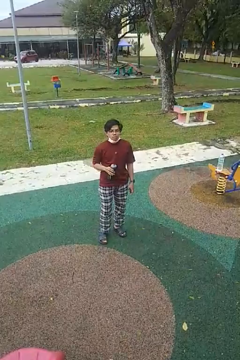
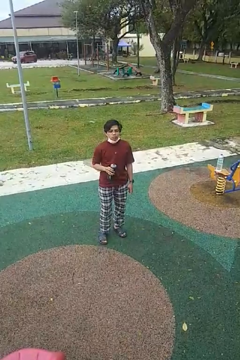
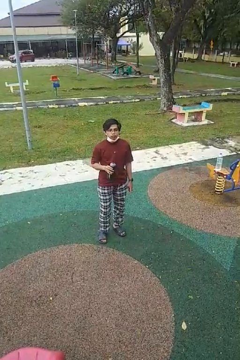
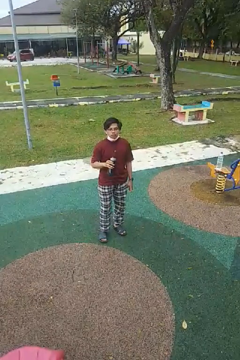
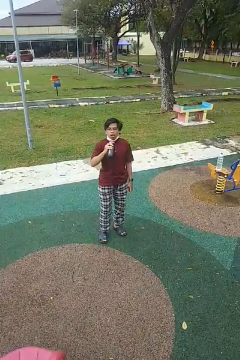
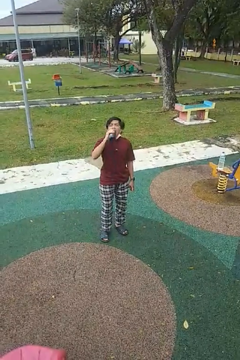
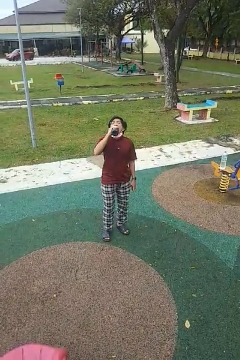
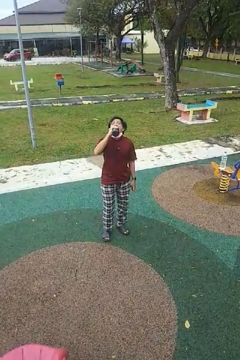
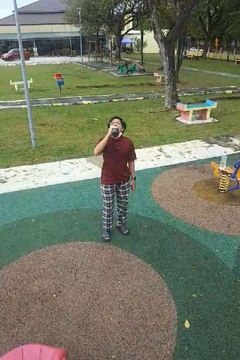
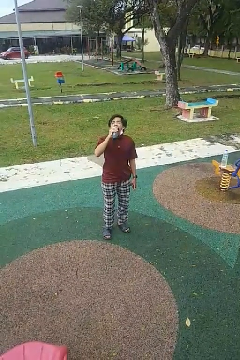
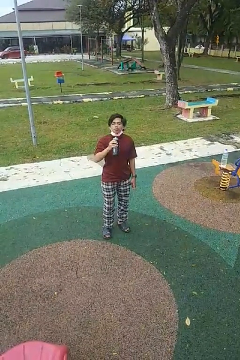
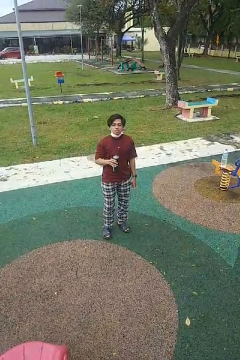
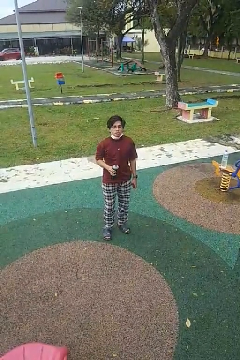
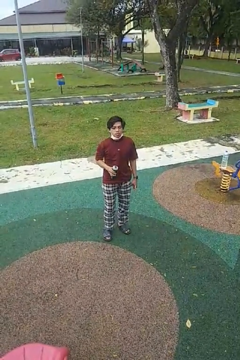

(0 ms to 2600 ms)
person drinks from bottle

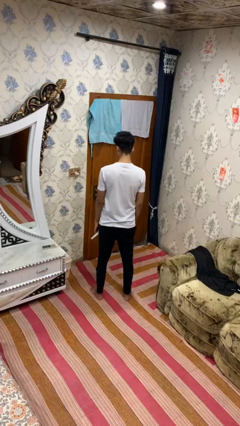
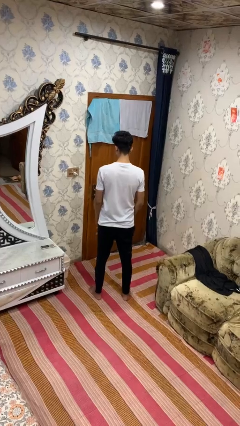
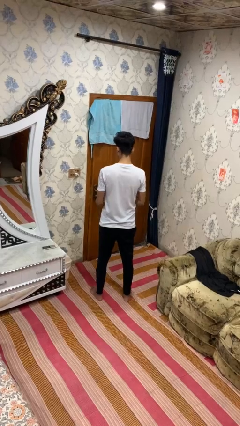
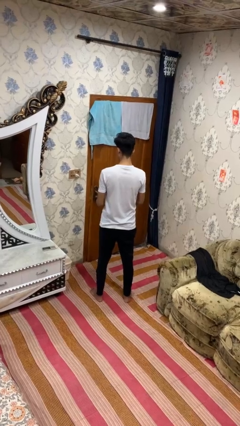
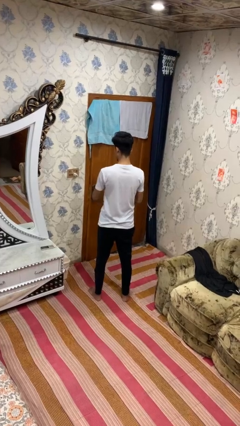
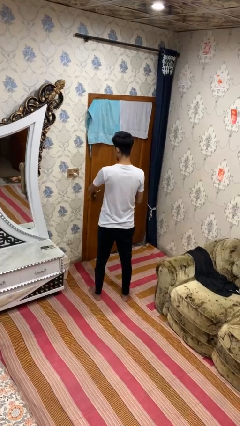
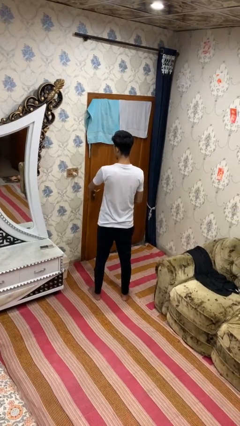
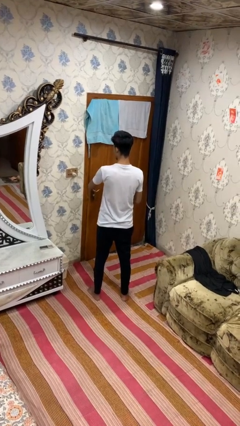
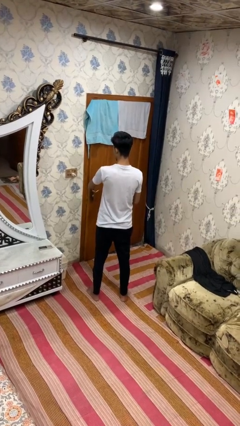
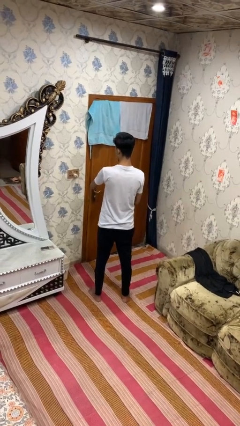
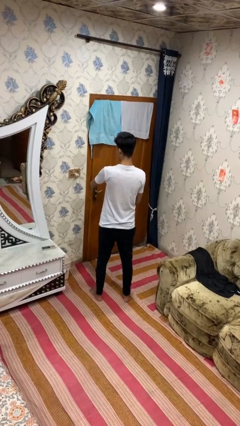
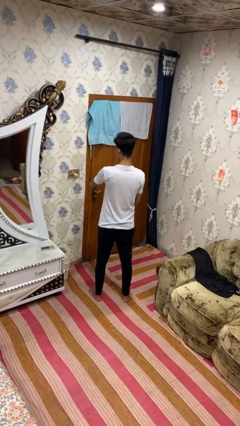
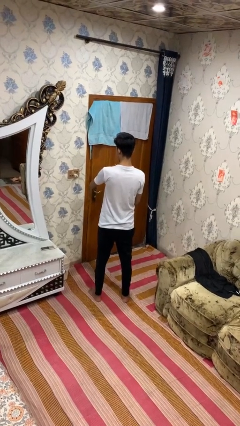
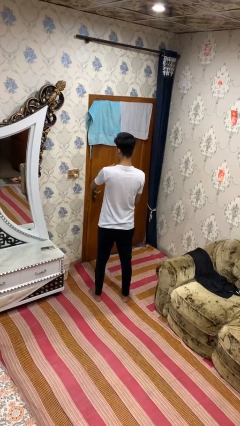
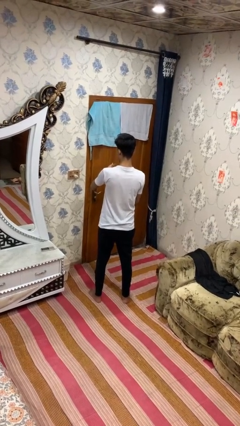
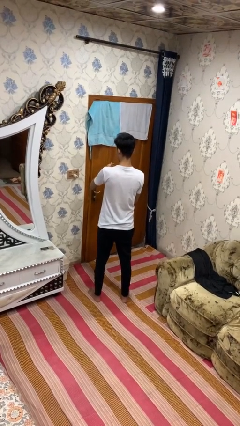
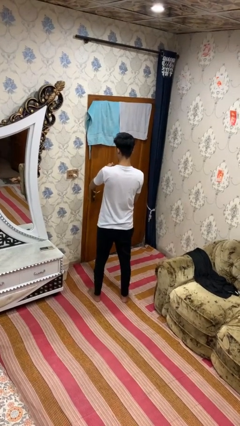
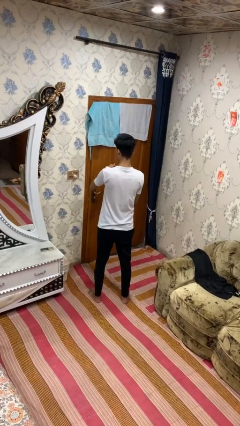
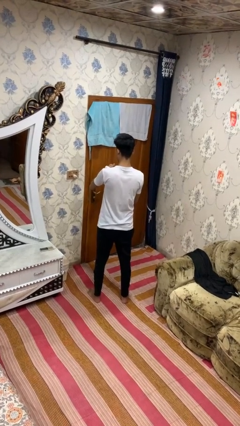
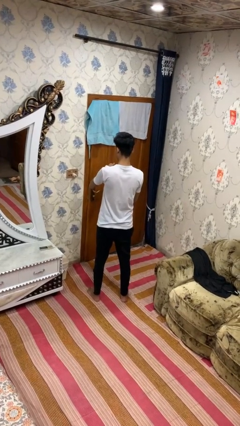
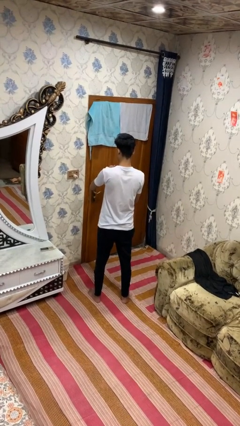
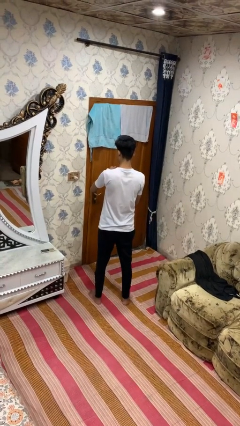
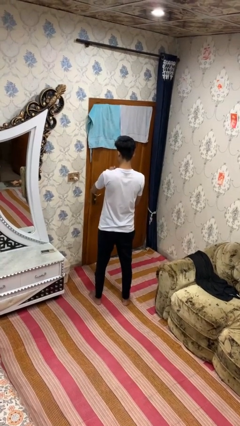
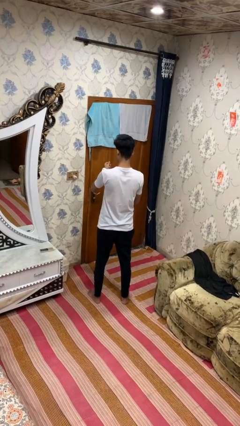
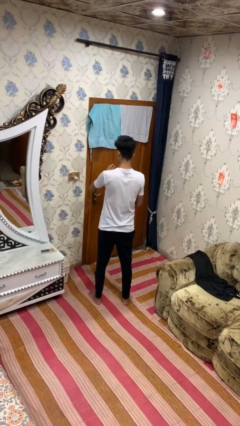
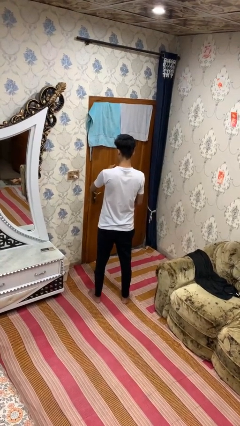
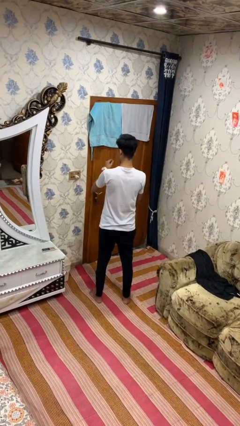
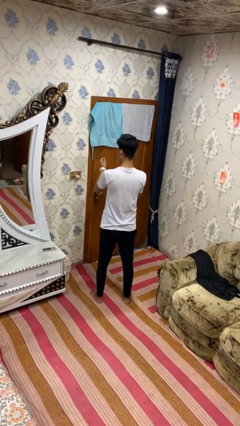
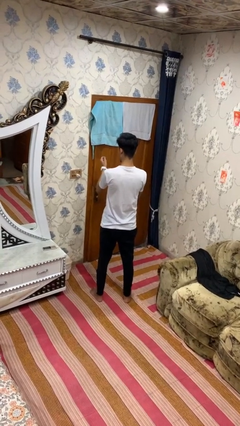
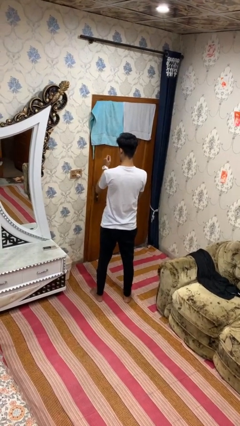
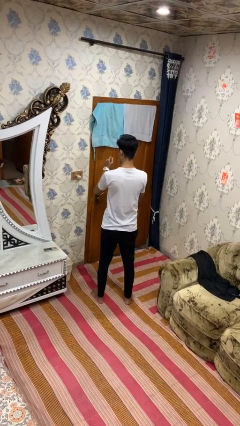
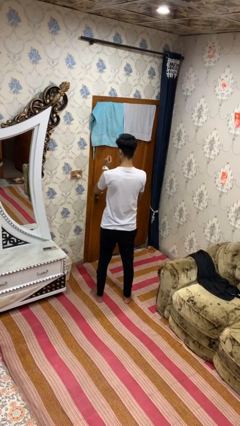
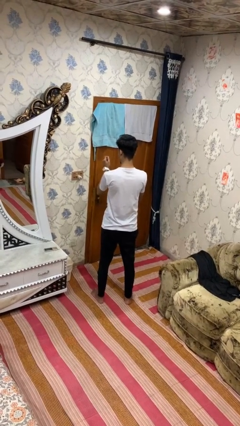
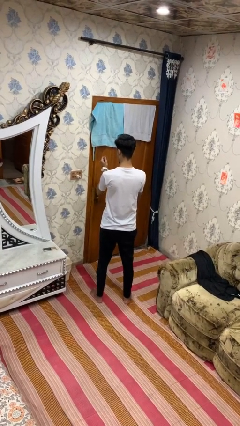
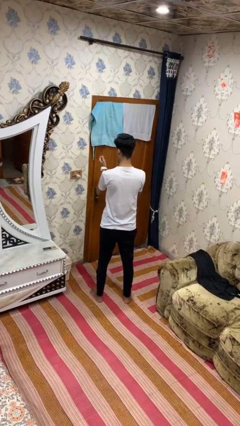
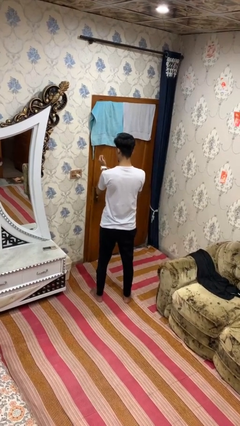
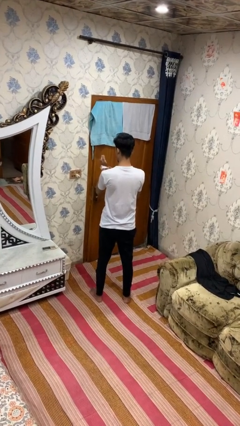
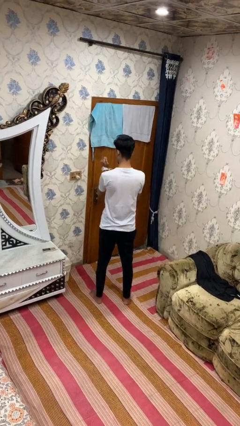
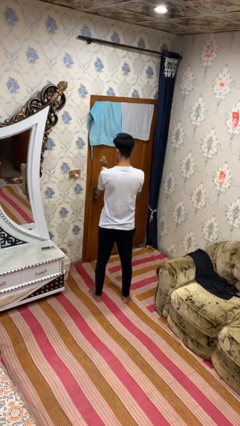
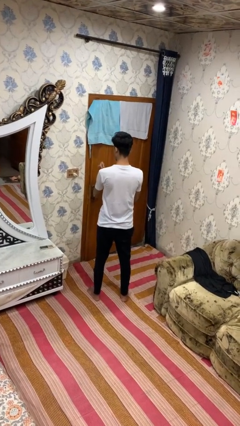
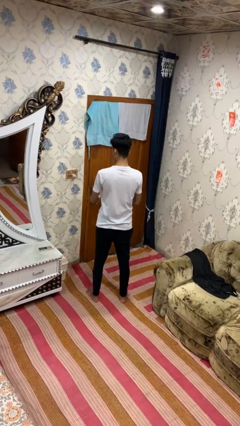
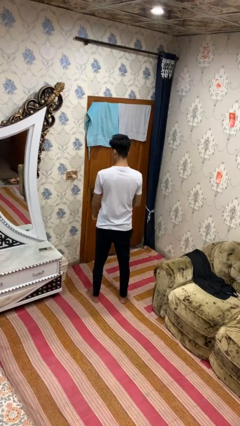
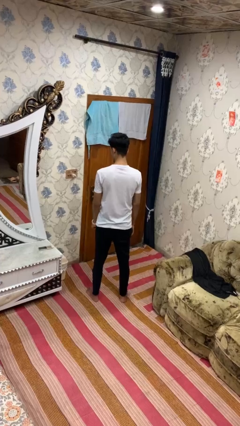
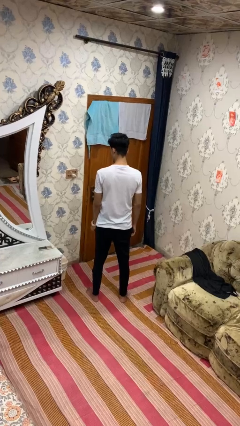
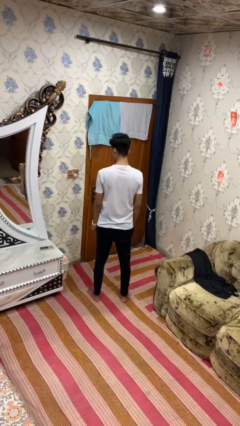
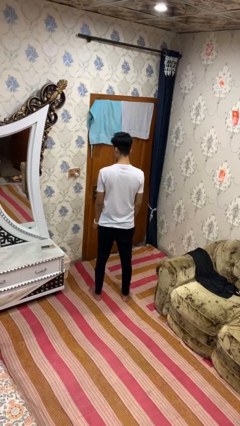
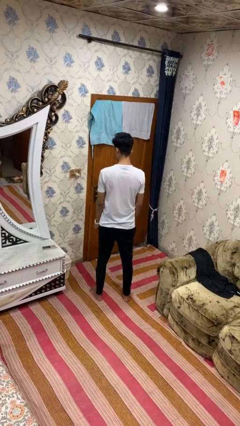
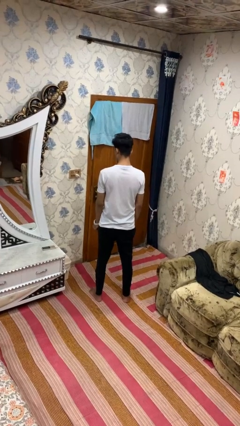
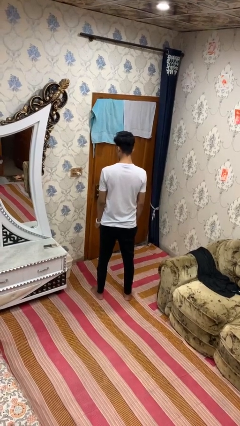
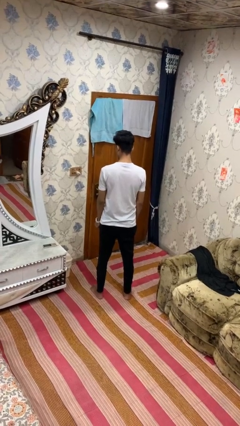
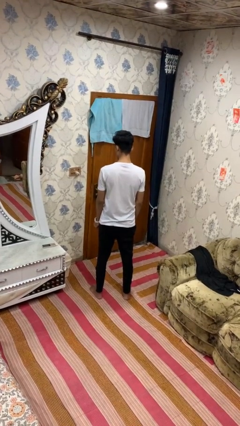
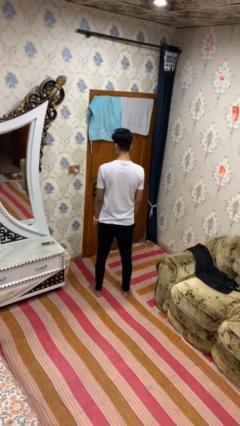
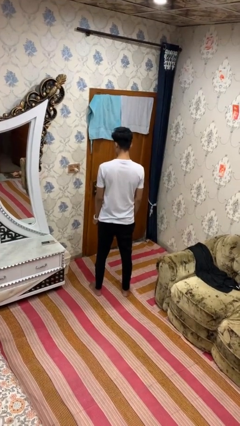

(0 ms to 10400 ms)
person puts on wristwatch

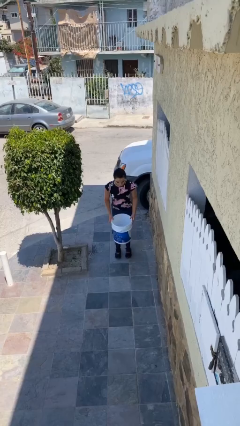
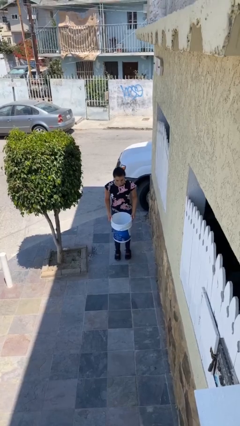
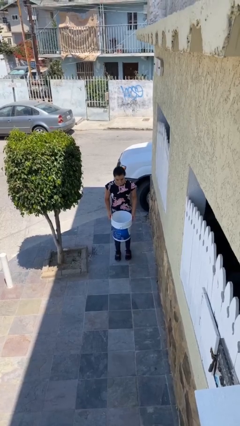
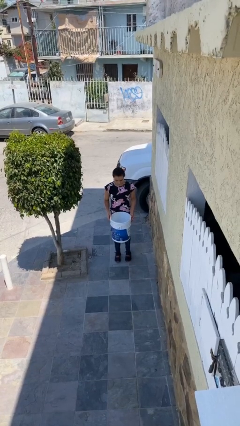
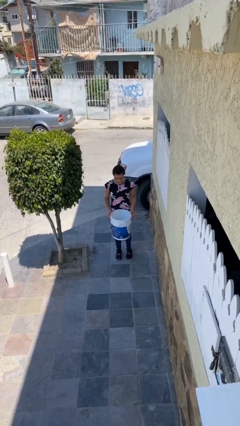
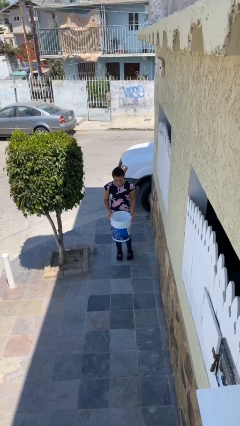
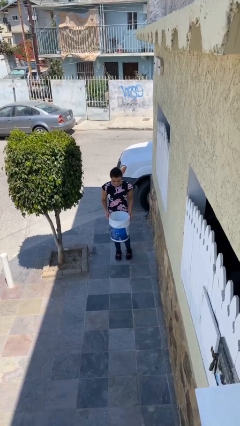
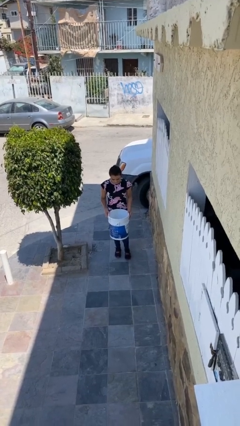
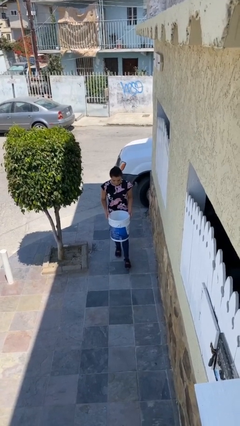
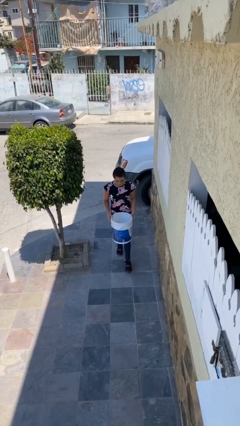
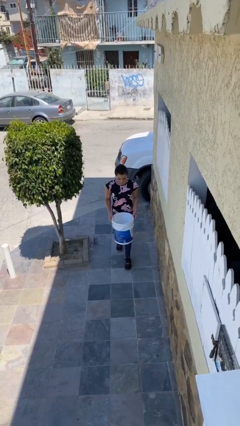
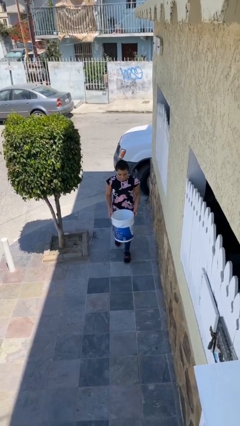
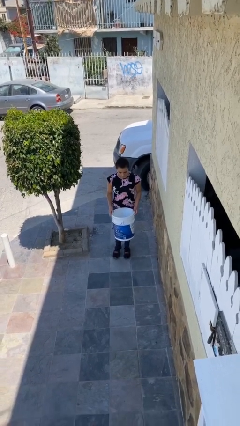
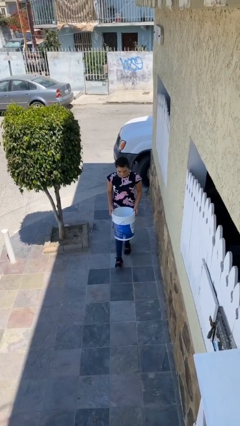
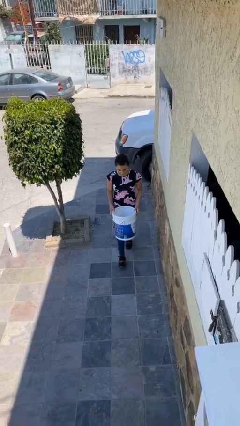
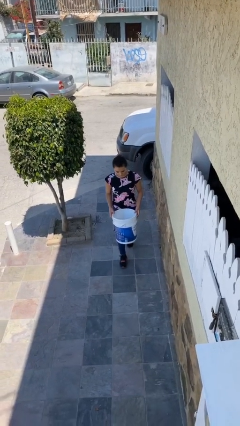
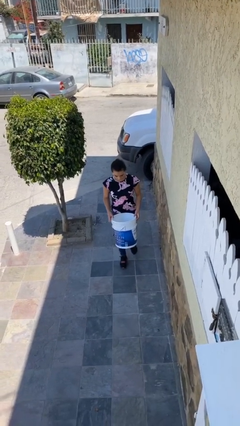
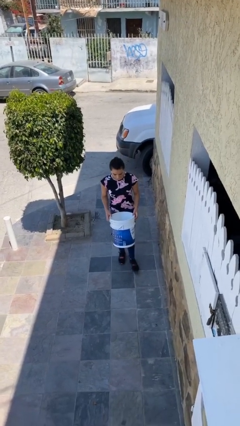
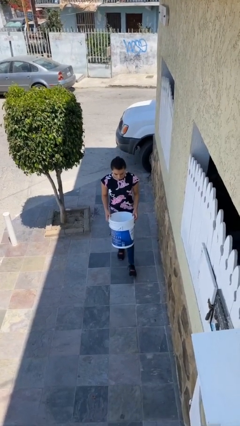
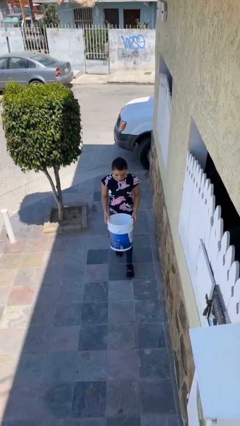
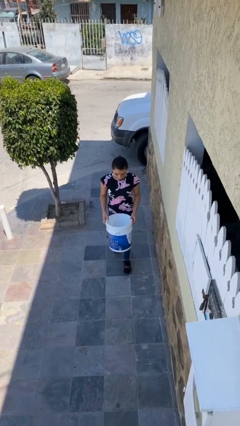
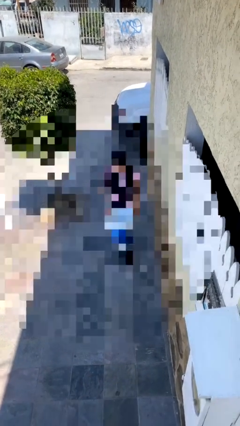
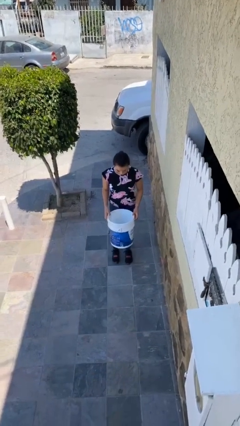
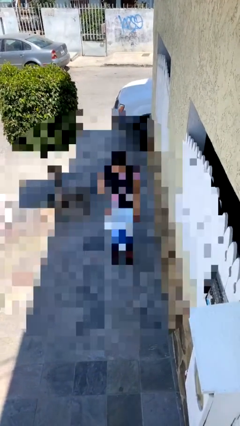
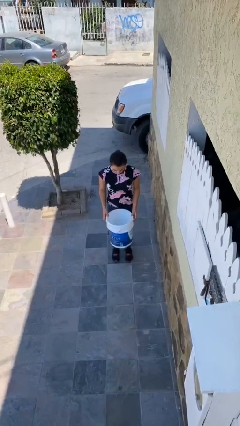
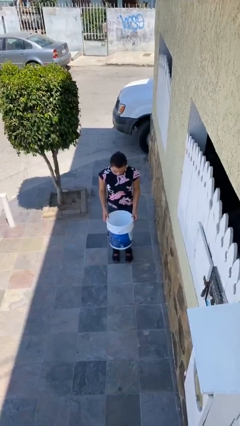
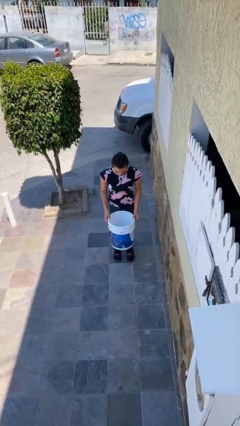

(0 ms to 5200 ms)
person carries heavy object
